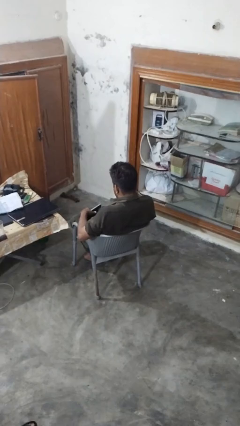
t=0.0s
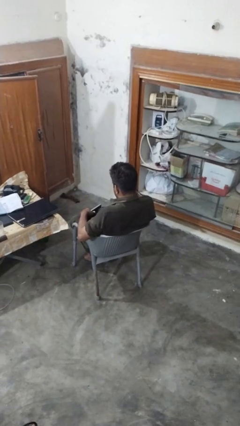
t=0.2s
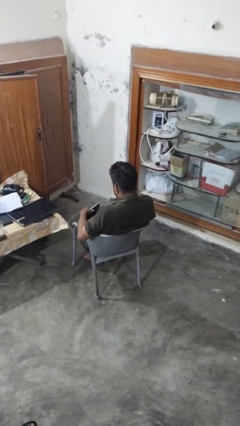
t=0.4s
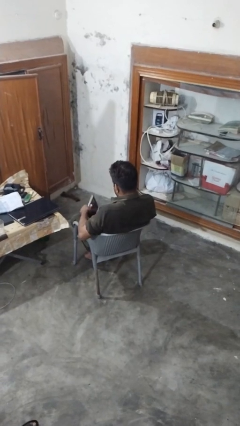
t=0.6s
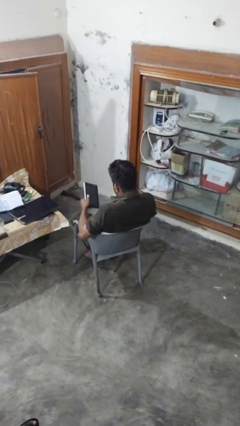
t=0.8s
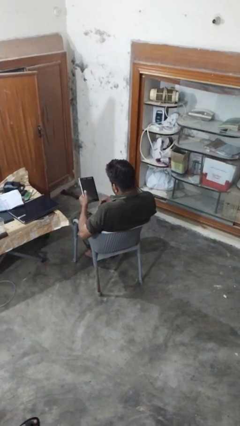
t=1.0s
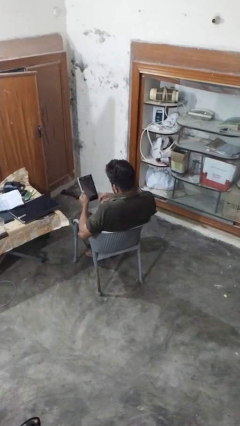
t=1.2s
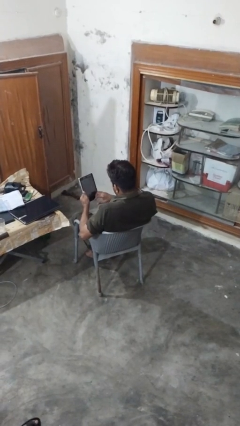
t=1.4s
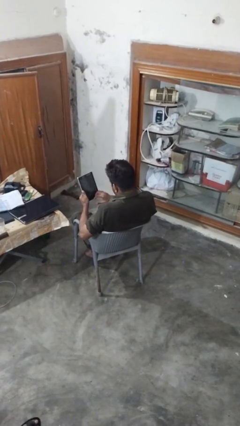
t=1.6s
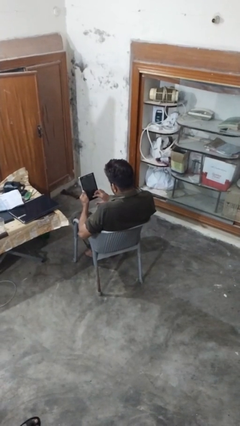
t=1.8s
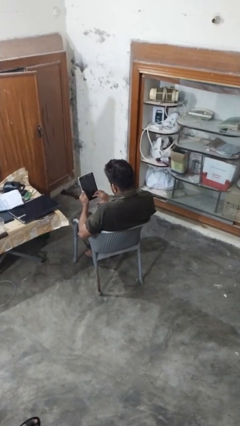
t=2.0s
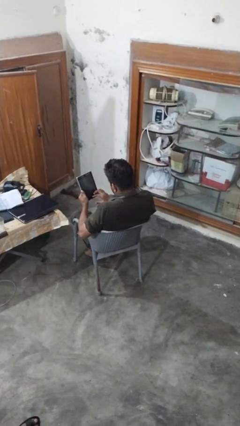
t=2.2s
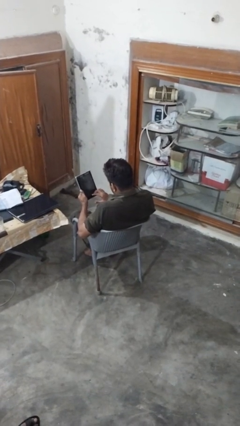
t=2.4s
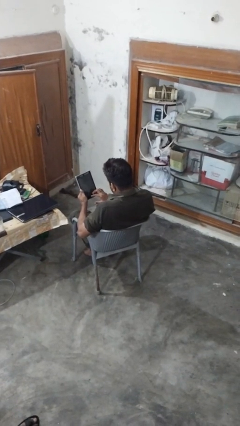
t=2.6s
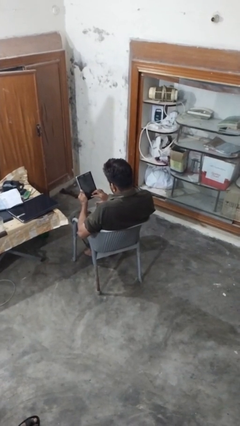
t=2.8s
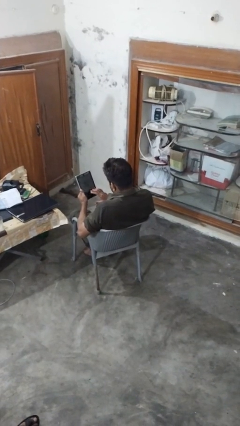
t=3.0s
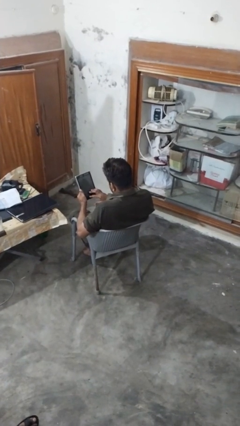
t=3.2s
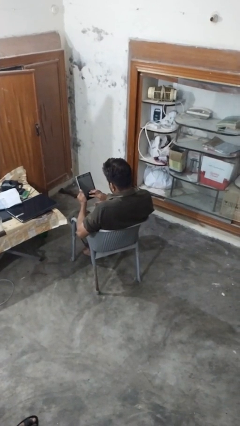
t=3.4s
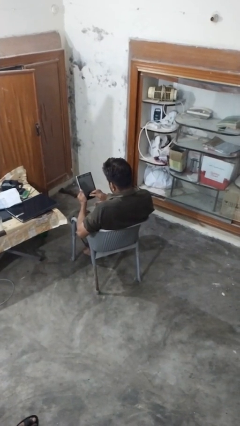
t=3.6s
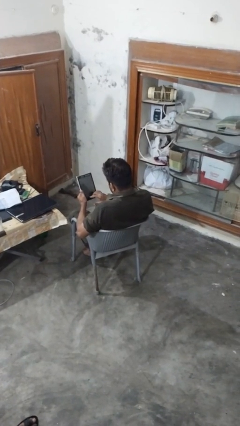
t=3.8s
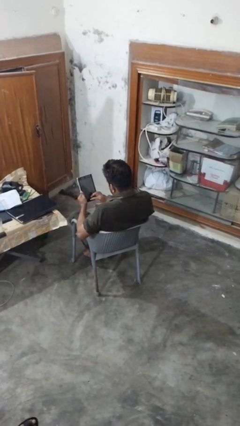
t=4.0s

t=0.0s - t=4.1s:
person interacts with tablet

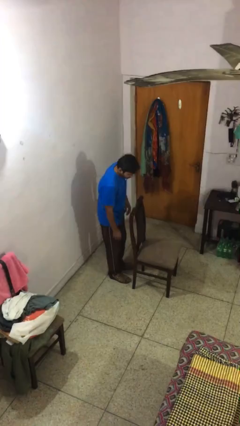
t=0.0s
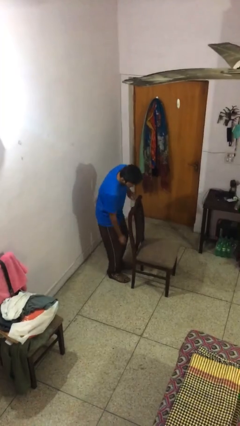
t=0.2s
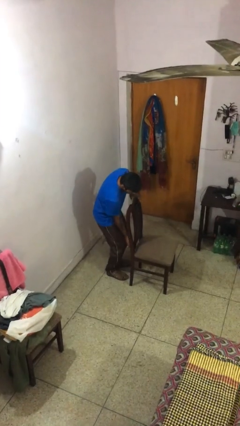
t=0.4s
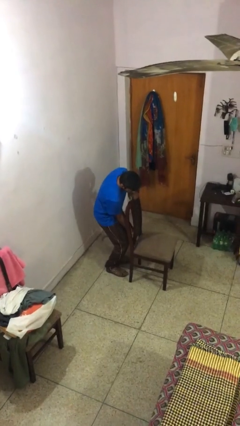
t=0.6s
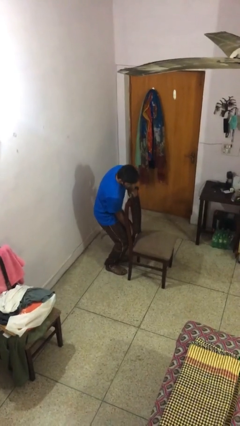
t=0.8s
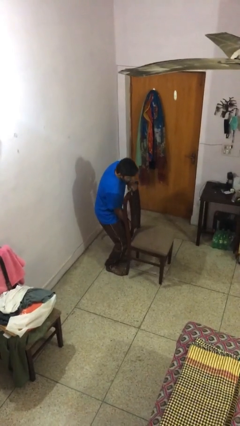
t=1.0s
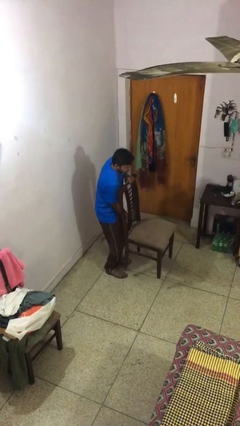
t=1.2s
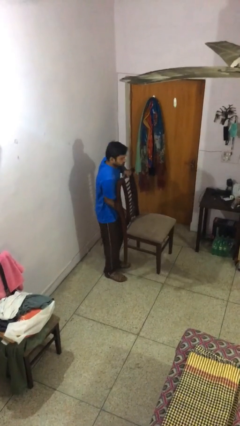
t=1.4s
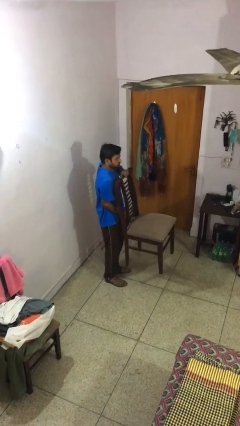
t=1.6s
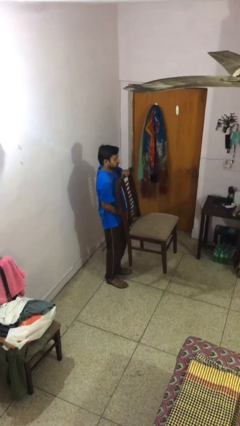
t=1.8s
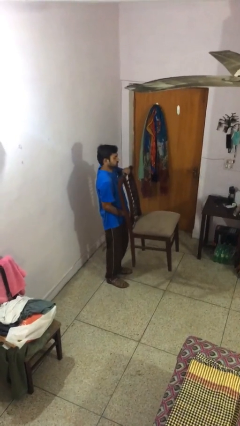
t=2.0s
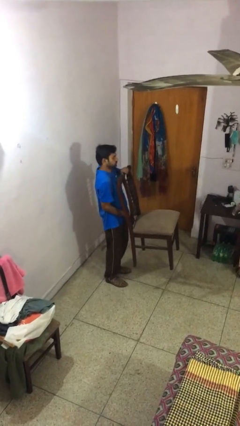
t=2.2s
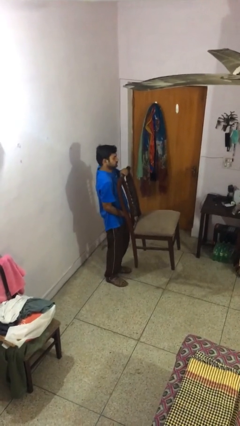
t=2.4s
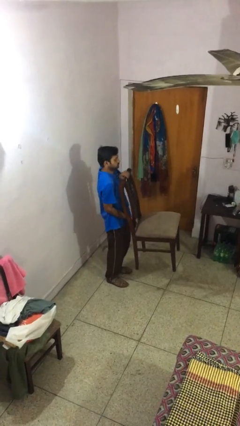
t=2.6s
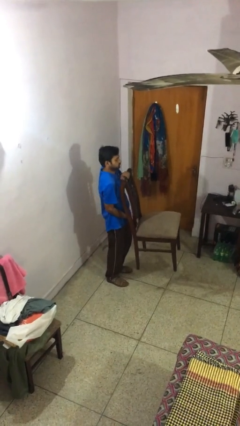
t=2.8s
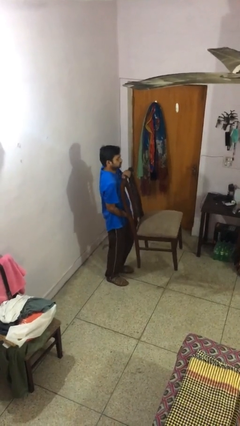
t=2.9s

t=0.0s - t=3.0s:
person picks up object from floor

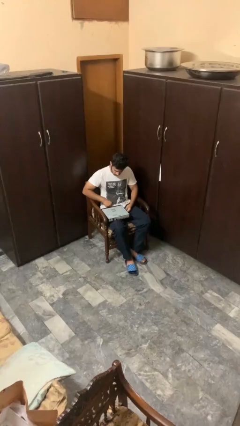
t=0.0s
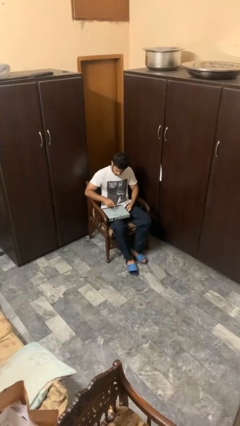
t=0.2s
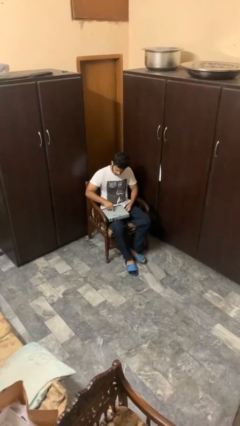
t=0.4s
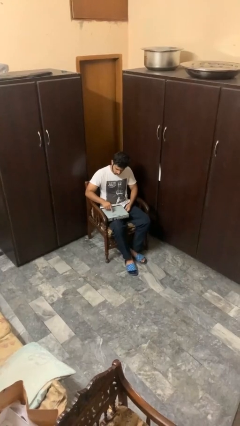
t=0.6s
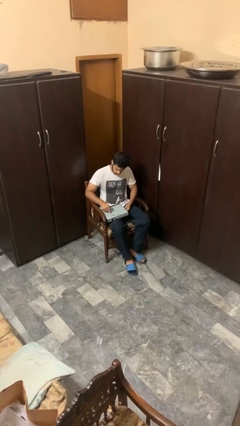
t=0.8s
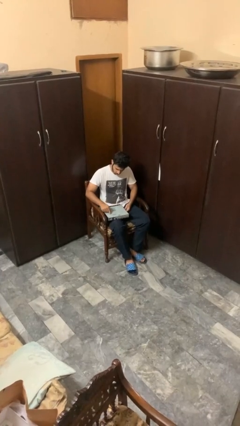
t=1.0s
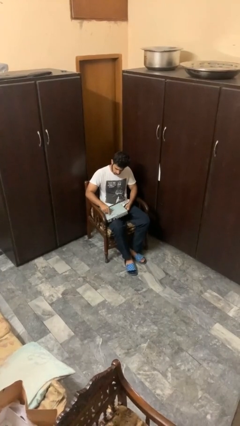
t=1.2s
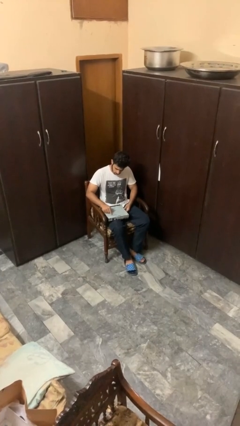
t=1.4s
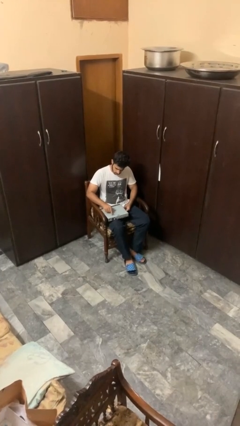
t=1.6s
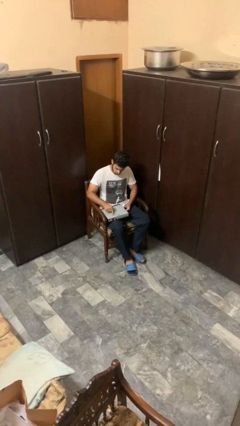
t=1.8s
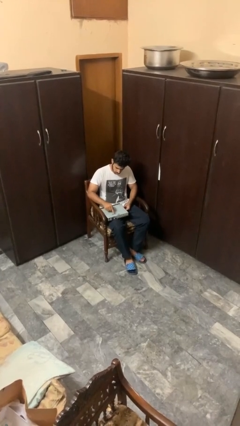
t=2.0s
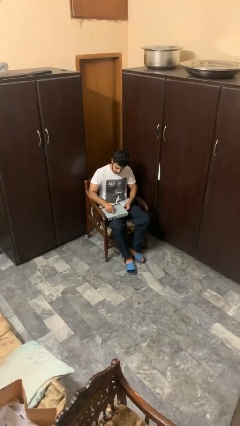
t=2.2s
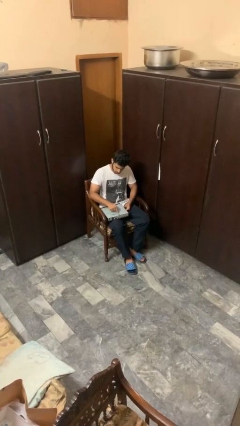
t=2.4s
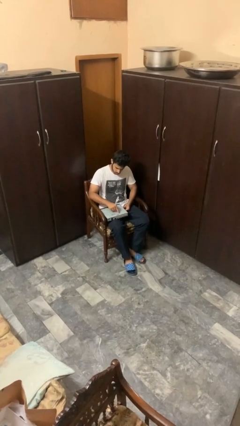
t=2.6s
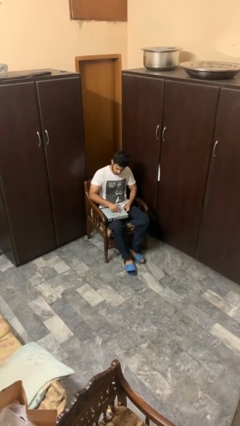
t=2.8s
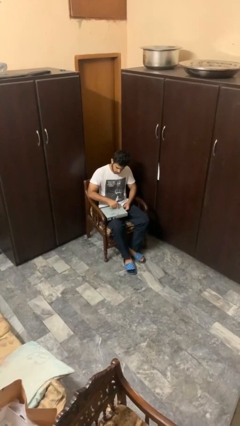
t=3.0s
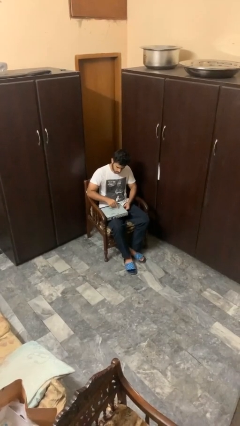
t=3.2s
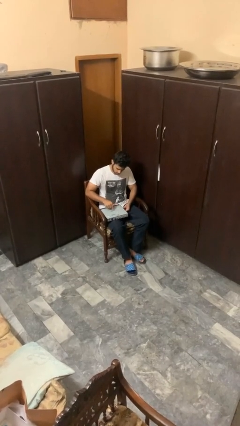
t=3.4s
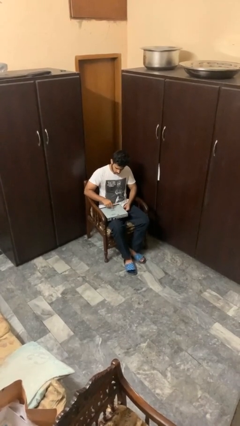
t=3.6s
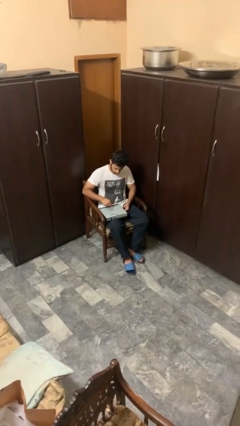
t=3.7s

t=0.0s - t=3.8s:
person taps object with finger

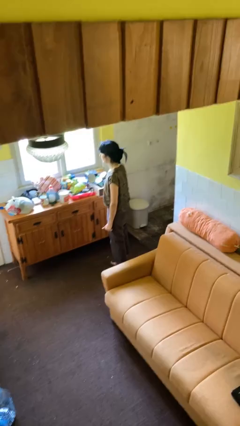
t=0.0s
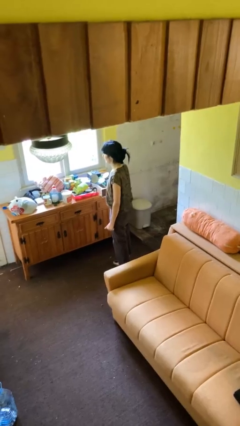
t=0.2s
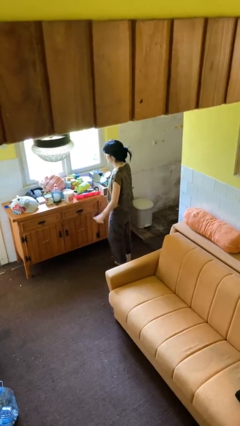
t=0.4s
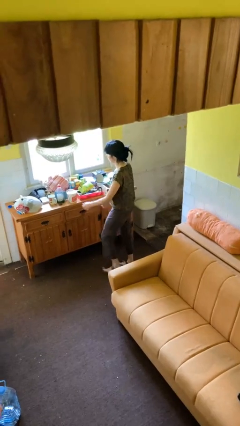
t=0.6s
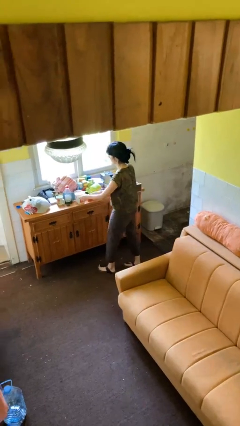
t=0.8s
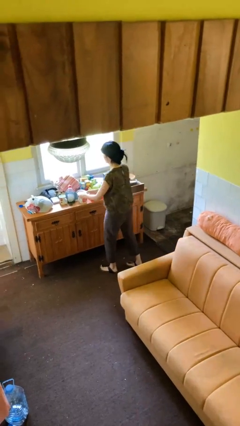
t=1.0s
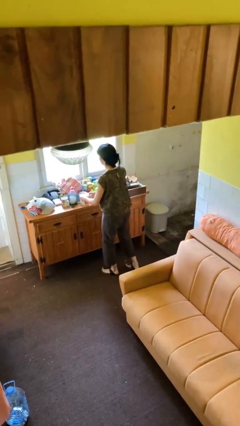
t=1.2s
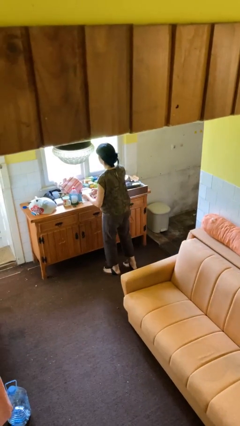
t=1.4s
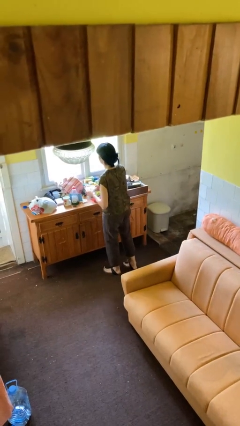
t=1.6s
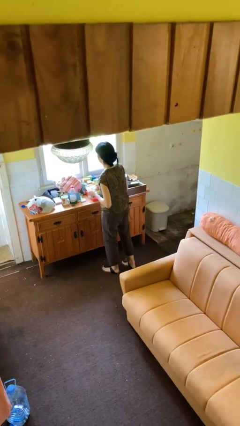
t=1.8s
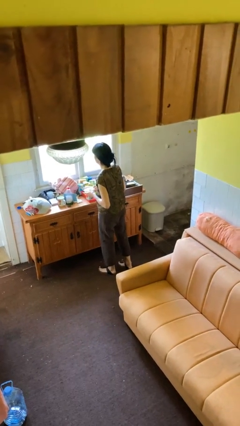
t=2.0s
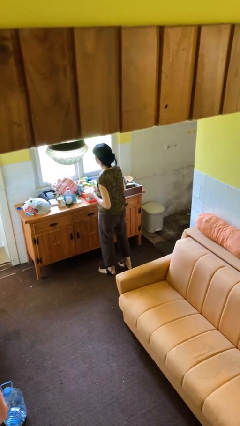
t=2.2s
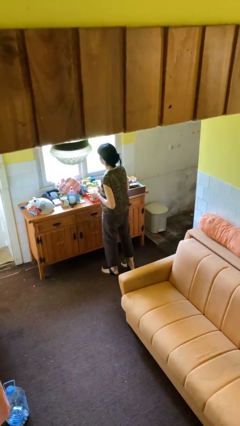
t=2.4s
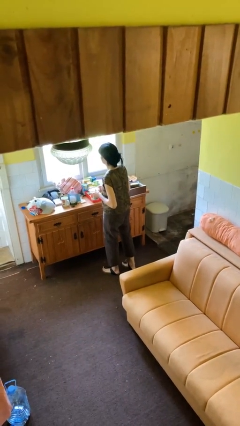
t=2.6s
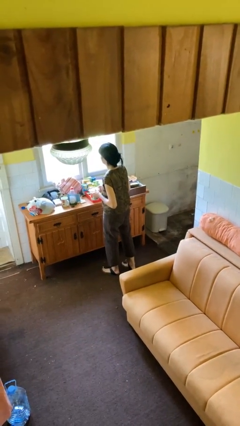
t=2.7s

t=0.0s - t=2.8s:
person picks up object from countertop

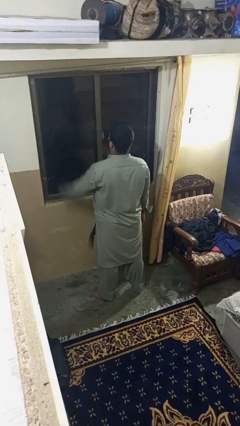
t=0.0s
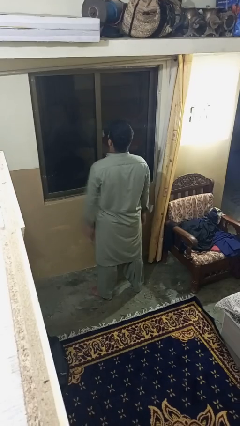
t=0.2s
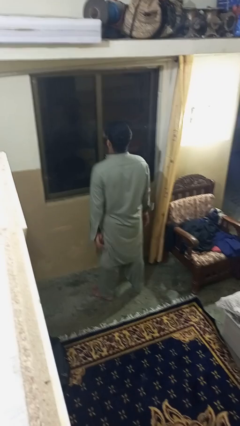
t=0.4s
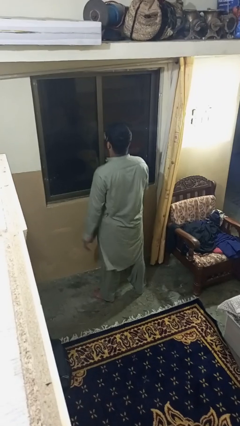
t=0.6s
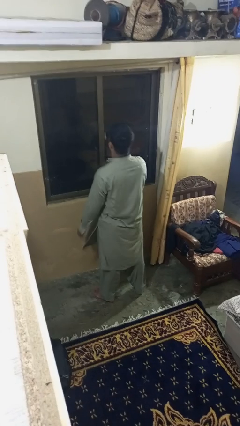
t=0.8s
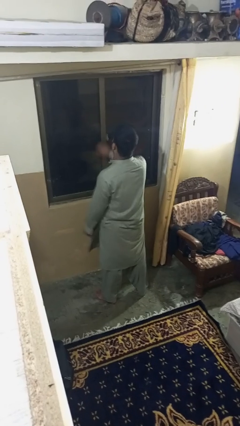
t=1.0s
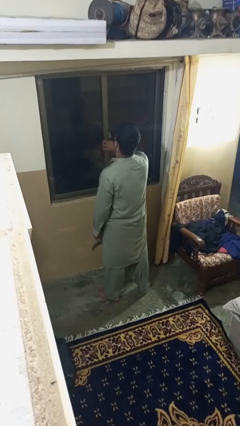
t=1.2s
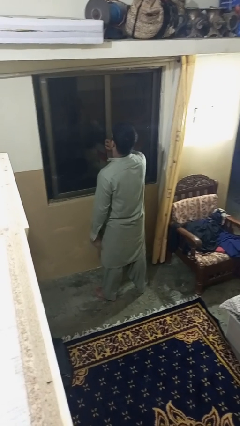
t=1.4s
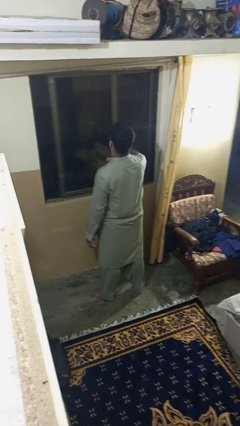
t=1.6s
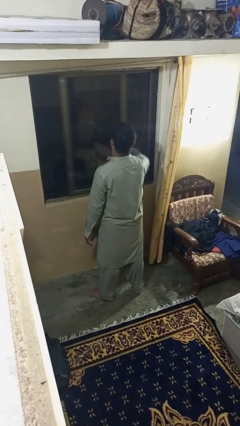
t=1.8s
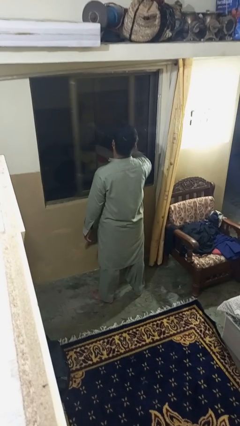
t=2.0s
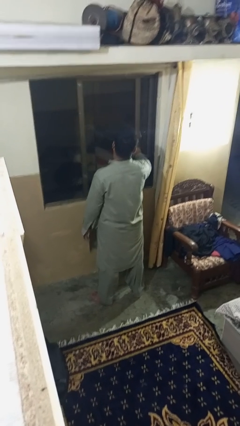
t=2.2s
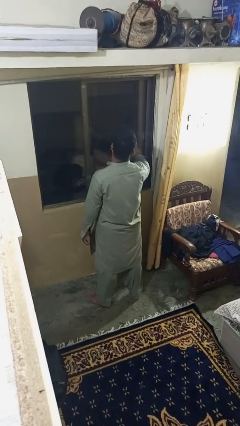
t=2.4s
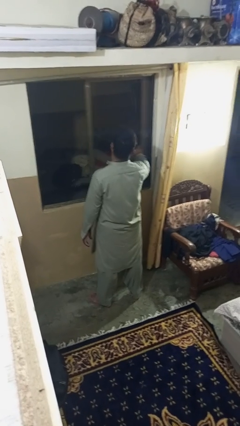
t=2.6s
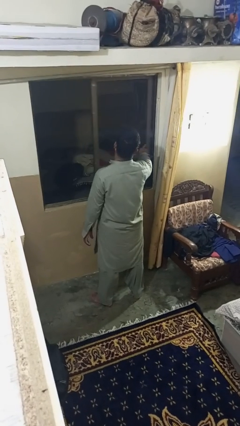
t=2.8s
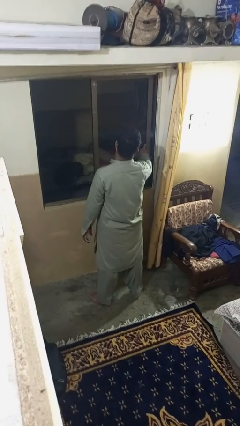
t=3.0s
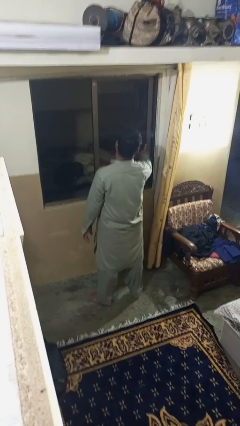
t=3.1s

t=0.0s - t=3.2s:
person opens home window

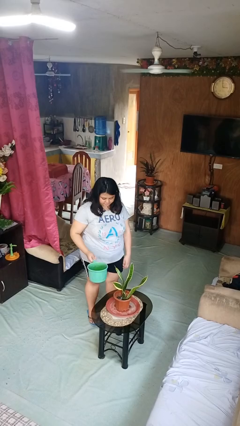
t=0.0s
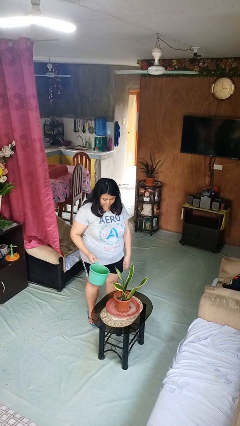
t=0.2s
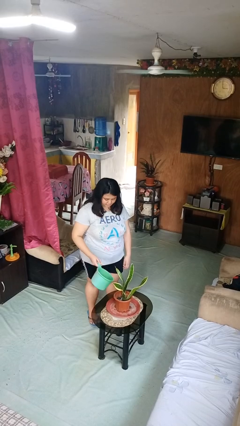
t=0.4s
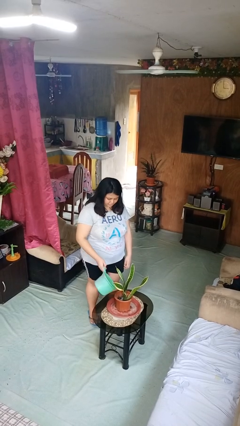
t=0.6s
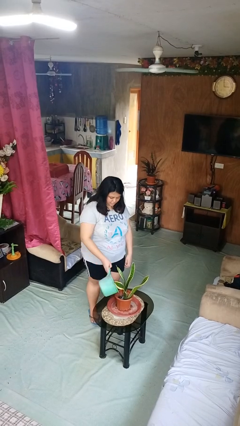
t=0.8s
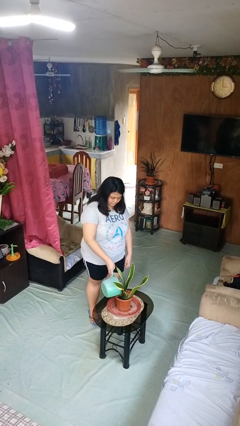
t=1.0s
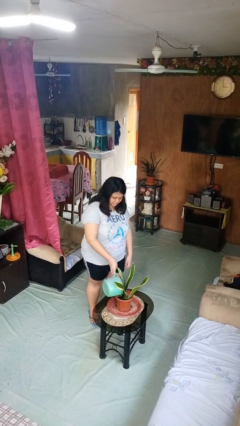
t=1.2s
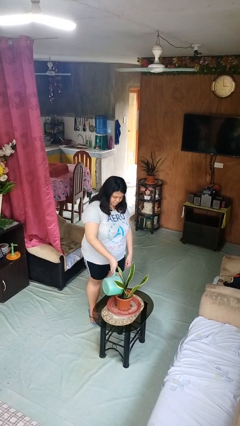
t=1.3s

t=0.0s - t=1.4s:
person waters houseplant
